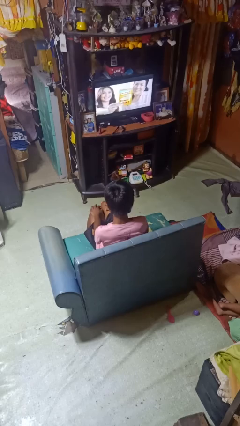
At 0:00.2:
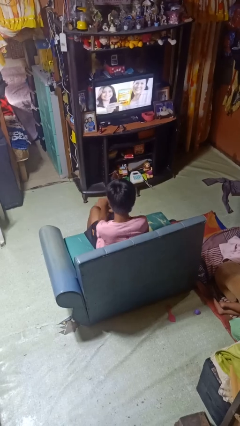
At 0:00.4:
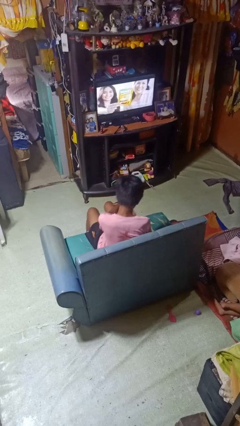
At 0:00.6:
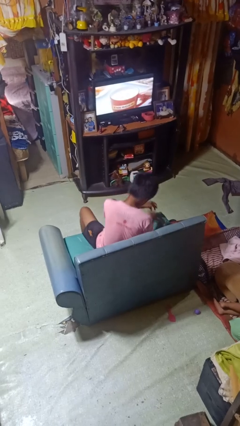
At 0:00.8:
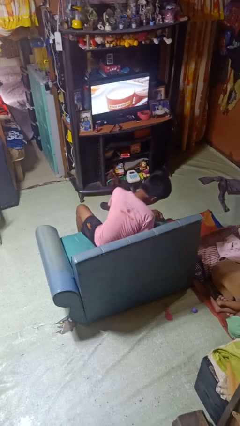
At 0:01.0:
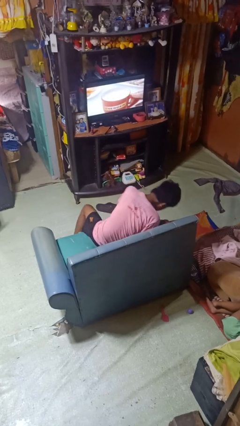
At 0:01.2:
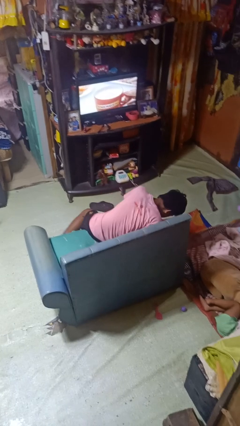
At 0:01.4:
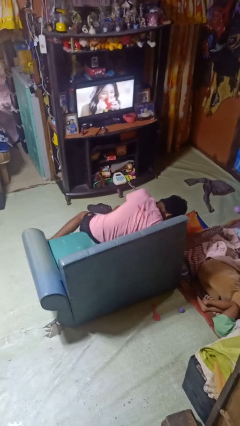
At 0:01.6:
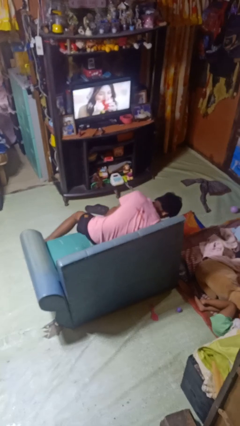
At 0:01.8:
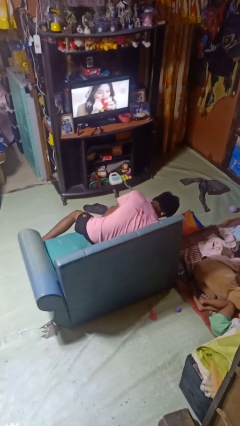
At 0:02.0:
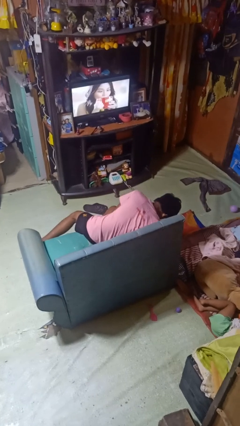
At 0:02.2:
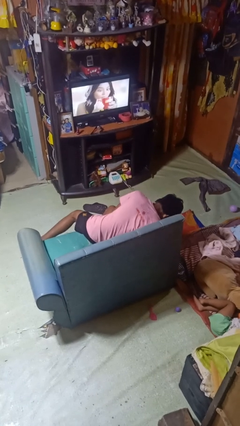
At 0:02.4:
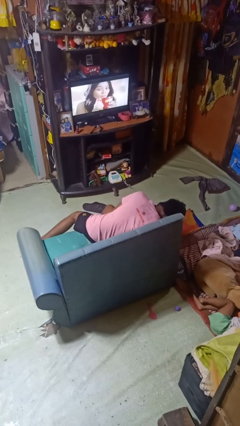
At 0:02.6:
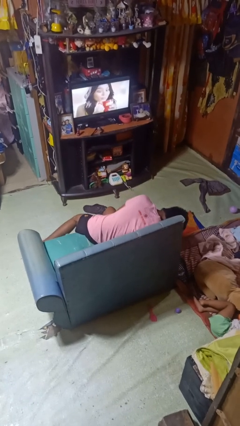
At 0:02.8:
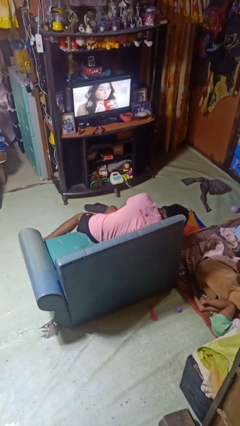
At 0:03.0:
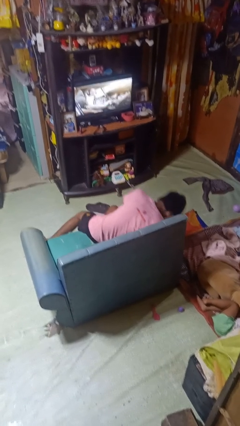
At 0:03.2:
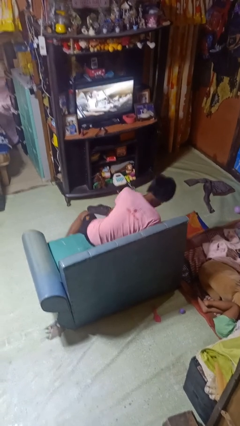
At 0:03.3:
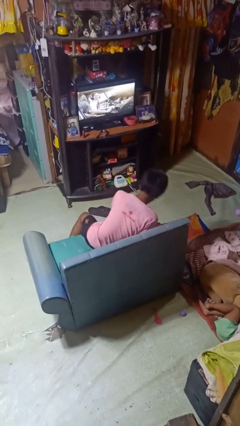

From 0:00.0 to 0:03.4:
person searches in couch

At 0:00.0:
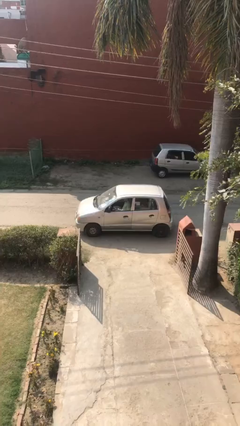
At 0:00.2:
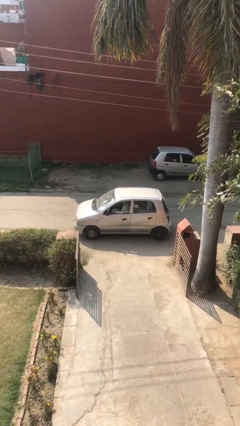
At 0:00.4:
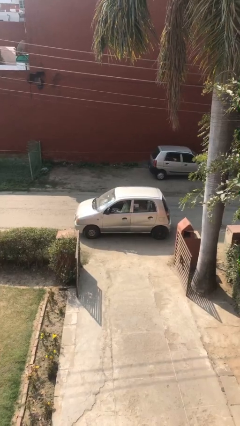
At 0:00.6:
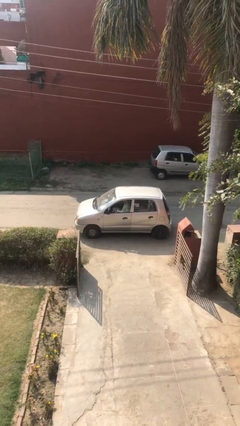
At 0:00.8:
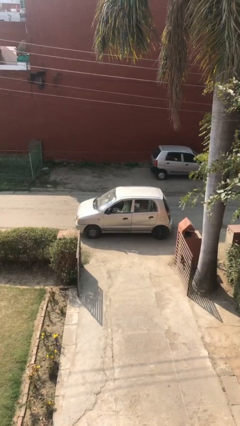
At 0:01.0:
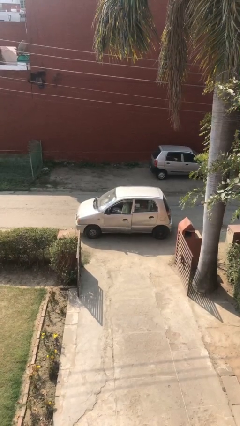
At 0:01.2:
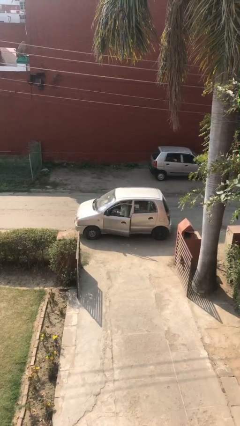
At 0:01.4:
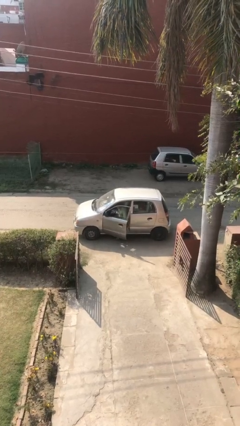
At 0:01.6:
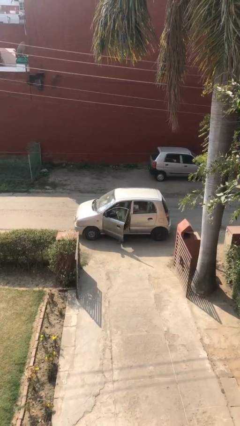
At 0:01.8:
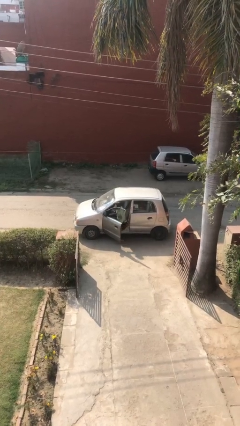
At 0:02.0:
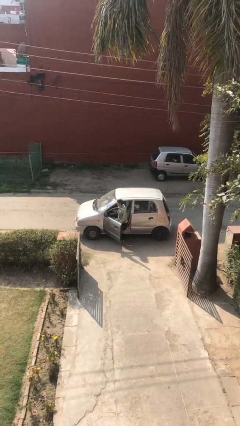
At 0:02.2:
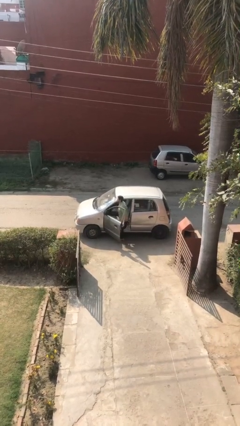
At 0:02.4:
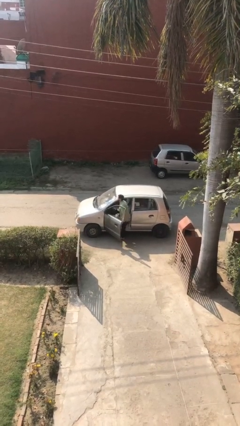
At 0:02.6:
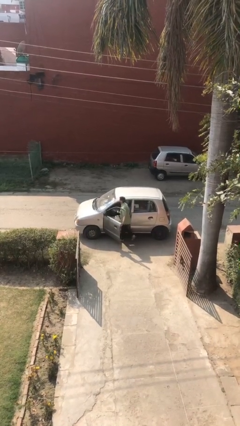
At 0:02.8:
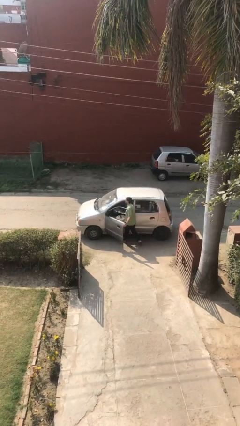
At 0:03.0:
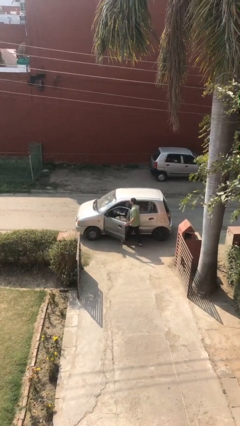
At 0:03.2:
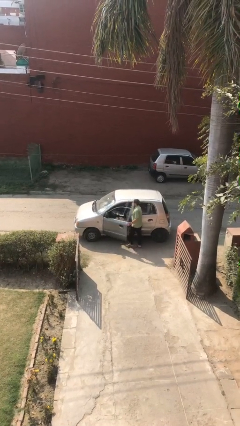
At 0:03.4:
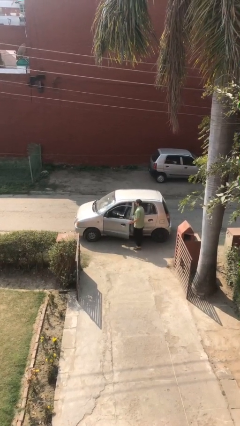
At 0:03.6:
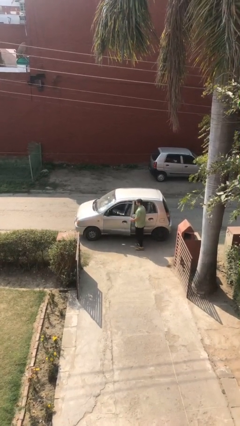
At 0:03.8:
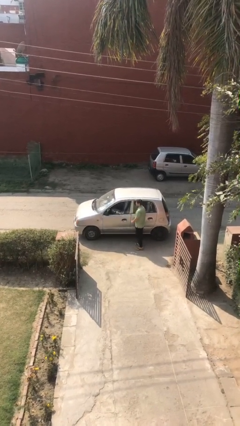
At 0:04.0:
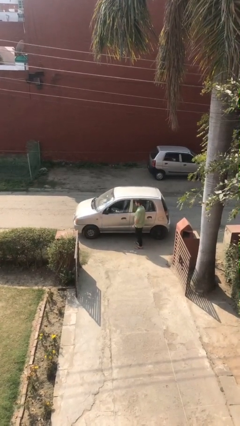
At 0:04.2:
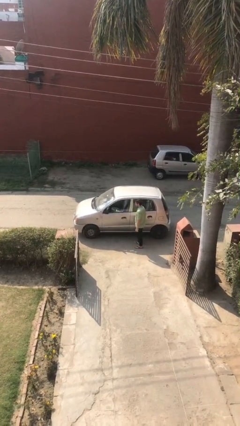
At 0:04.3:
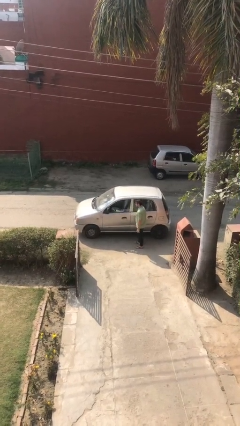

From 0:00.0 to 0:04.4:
car drops off person

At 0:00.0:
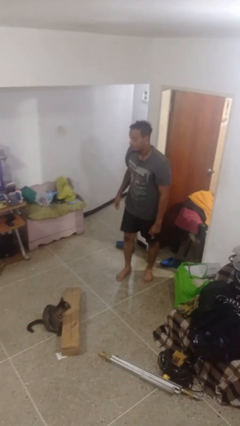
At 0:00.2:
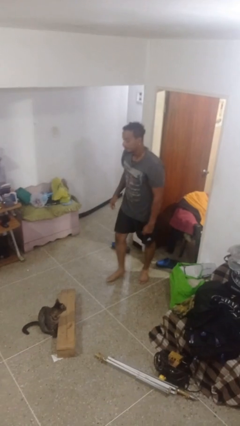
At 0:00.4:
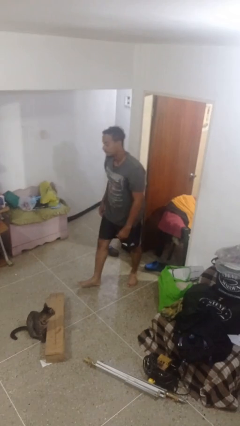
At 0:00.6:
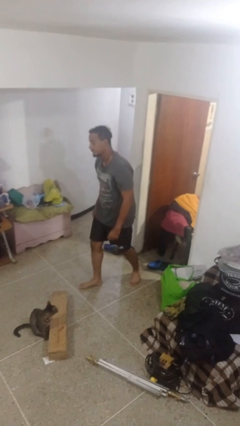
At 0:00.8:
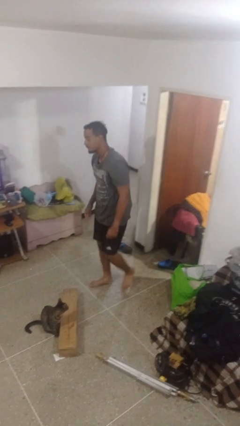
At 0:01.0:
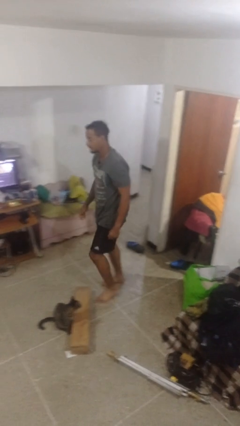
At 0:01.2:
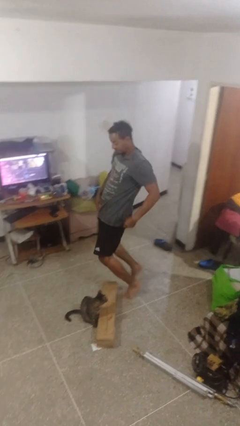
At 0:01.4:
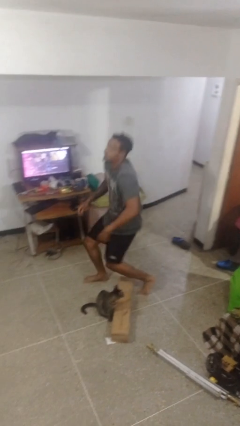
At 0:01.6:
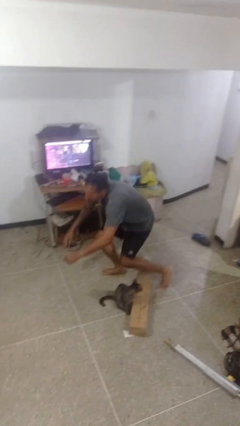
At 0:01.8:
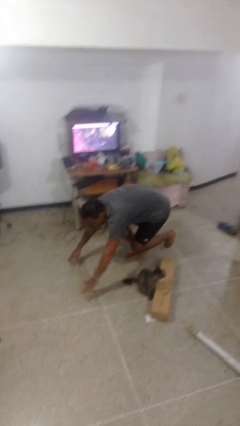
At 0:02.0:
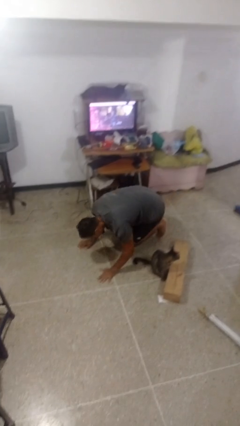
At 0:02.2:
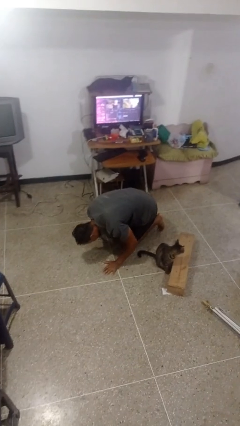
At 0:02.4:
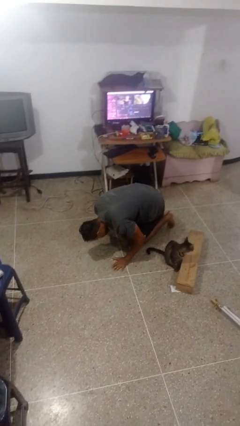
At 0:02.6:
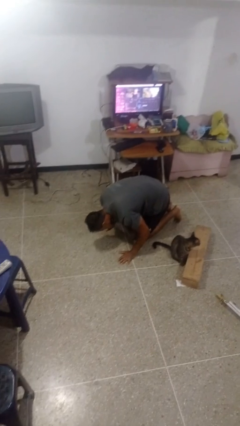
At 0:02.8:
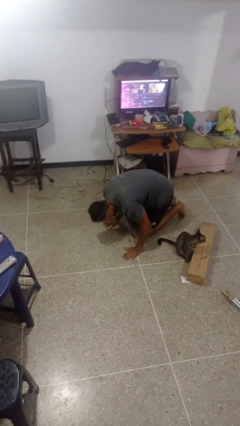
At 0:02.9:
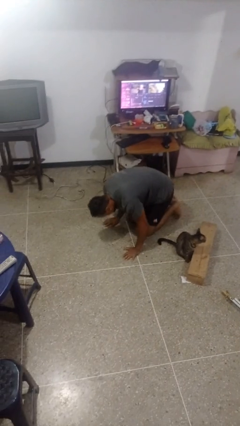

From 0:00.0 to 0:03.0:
person trips on object on floor

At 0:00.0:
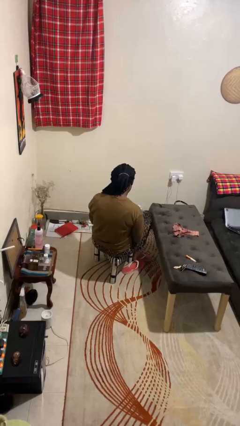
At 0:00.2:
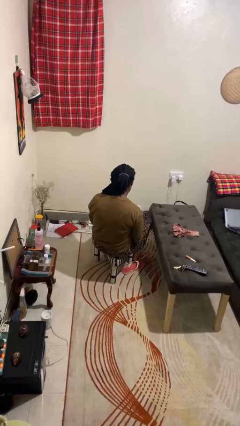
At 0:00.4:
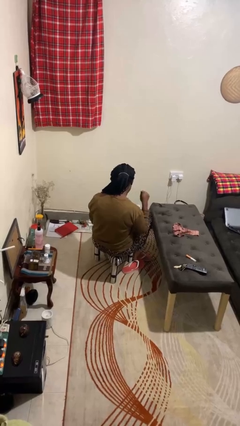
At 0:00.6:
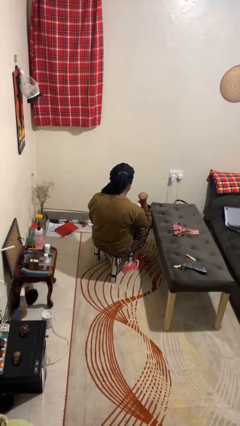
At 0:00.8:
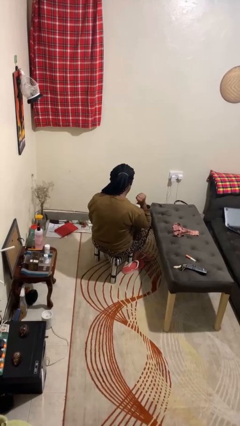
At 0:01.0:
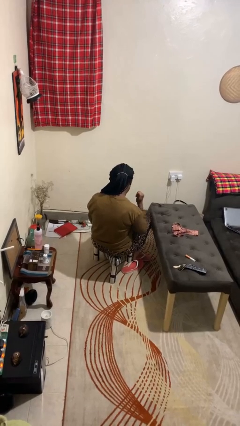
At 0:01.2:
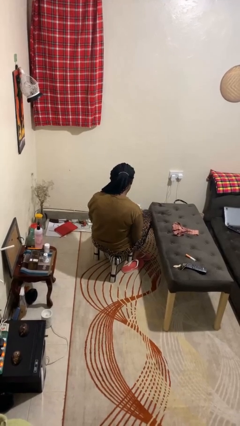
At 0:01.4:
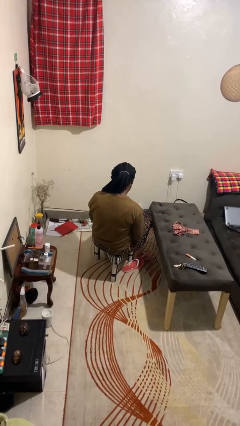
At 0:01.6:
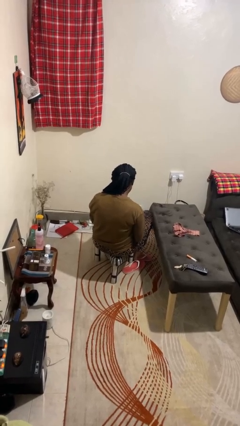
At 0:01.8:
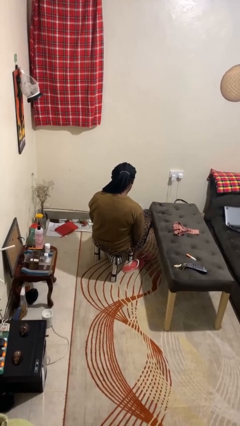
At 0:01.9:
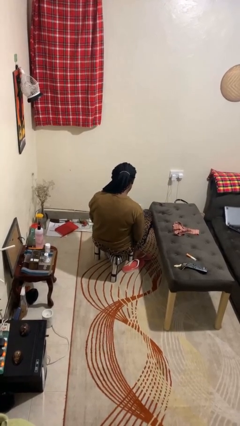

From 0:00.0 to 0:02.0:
person gestures behind me

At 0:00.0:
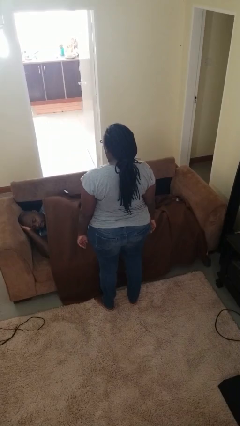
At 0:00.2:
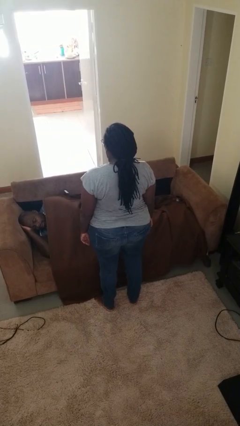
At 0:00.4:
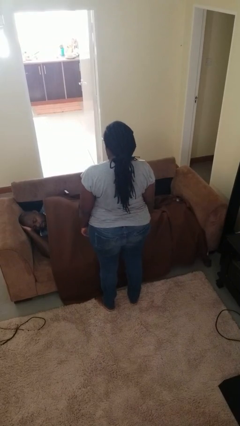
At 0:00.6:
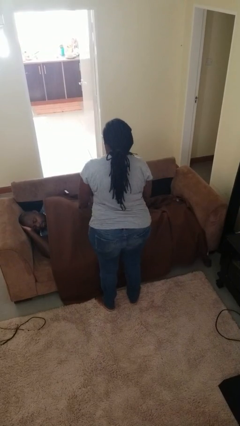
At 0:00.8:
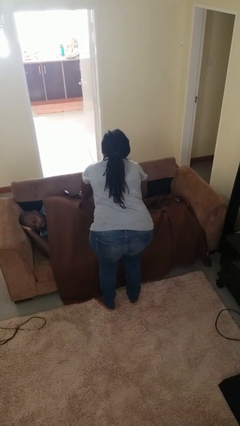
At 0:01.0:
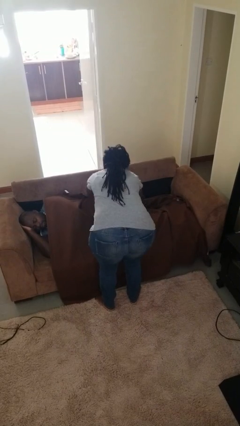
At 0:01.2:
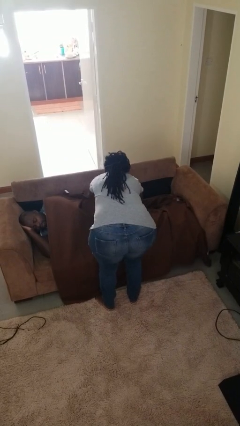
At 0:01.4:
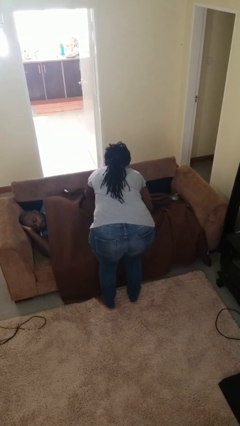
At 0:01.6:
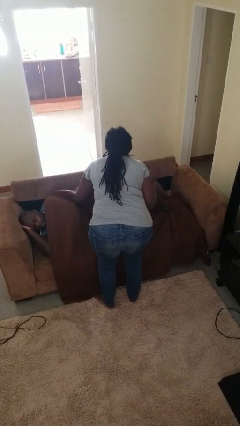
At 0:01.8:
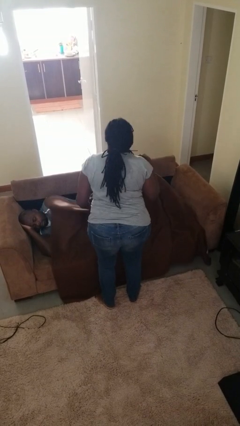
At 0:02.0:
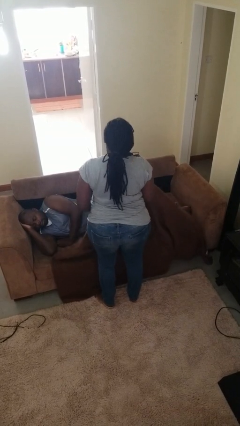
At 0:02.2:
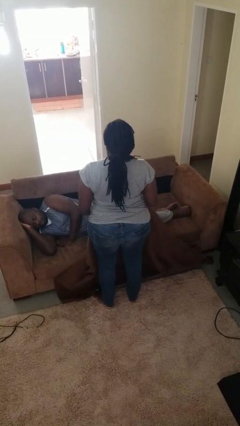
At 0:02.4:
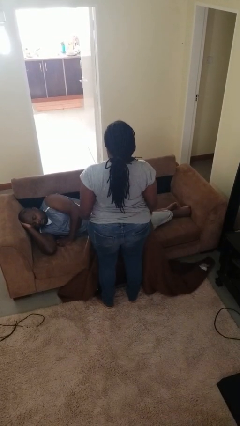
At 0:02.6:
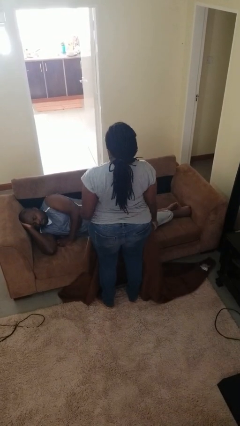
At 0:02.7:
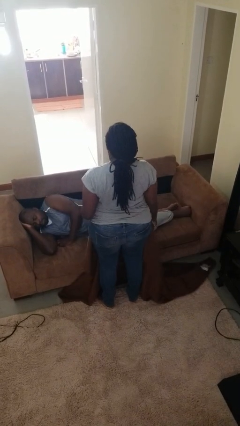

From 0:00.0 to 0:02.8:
person uncovers friend with blanket

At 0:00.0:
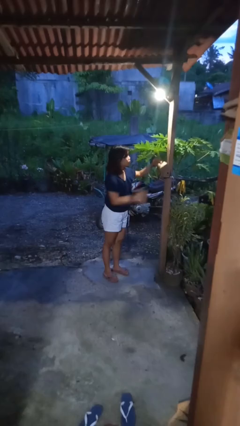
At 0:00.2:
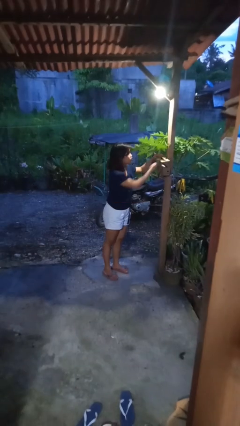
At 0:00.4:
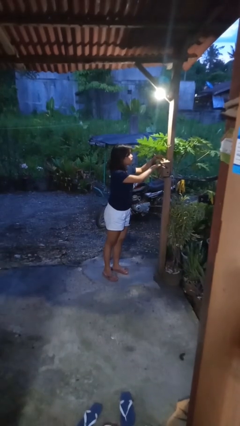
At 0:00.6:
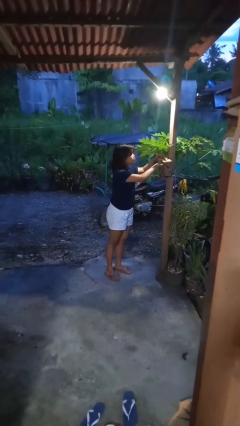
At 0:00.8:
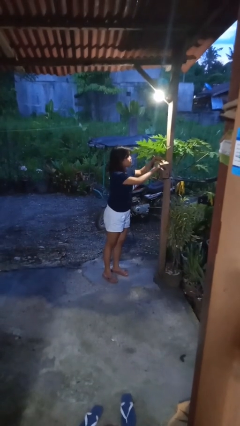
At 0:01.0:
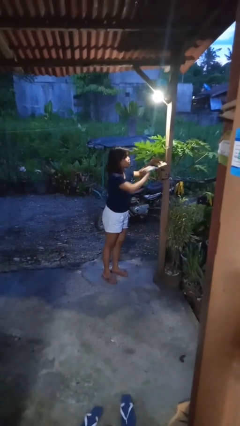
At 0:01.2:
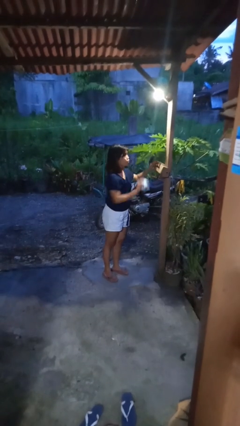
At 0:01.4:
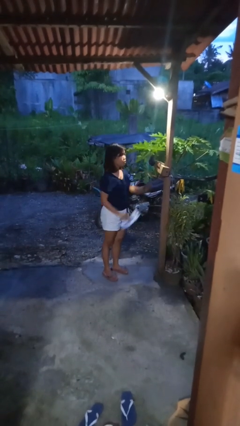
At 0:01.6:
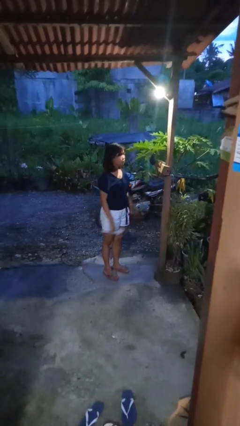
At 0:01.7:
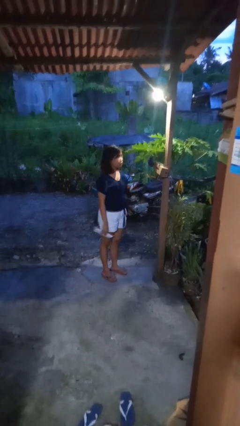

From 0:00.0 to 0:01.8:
person takes letters from mailbox
